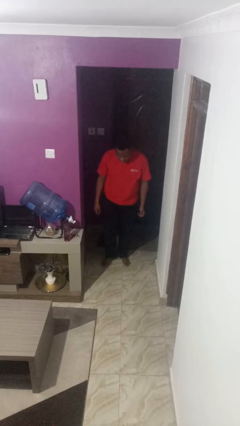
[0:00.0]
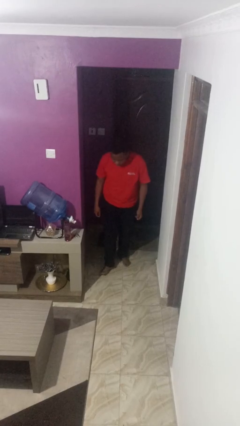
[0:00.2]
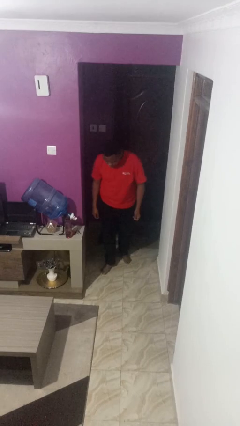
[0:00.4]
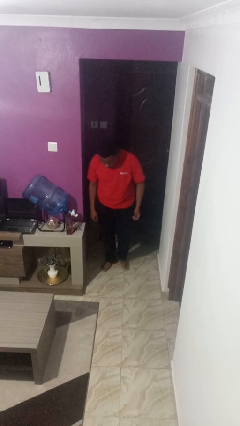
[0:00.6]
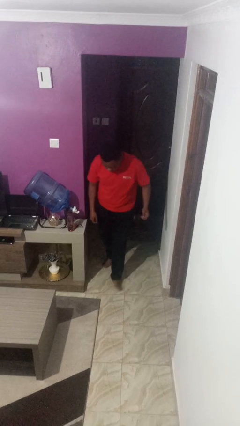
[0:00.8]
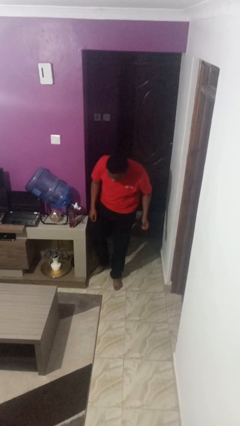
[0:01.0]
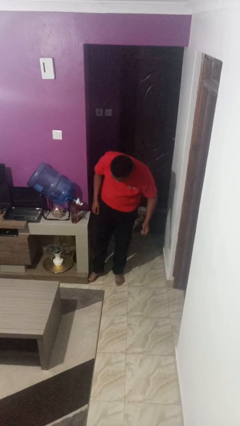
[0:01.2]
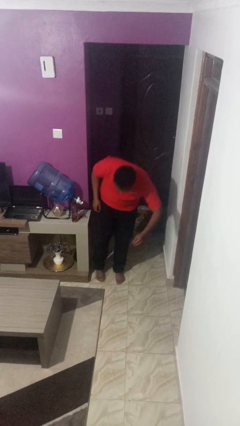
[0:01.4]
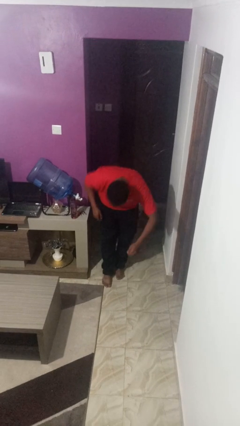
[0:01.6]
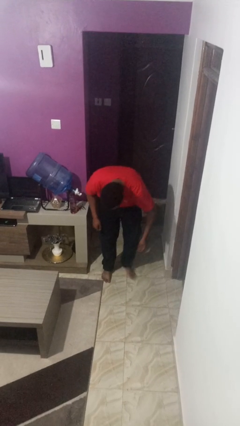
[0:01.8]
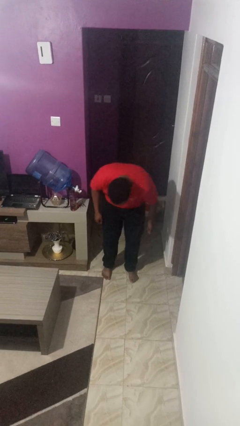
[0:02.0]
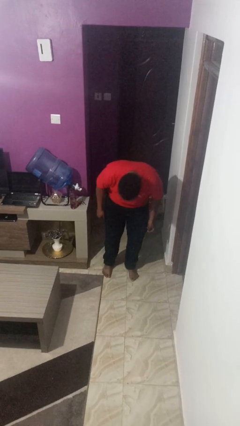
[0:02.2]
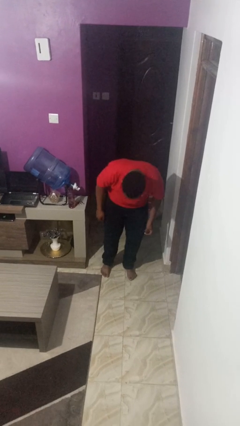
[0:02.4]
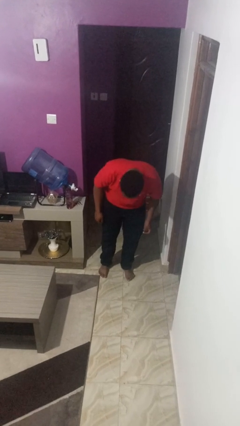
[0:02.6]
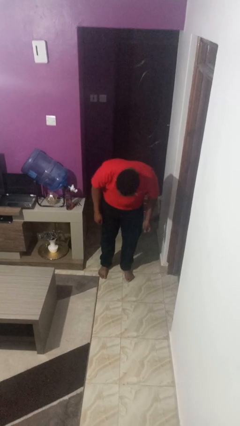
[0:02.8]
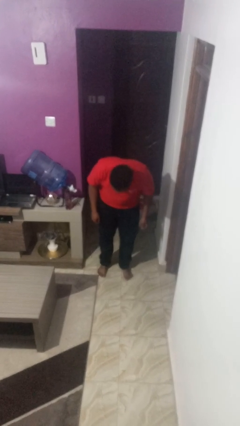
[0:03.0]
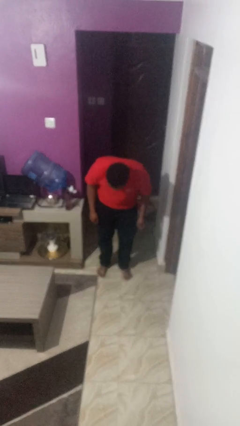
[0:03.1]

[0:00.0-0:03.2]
person stubs toe

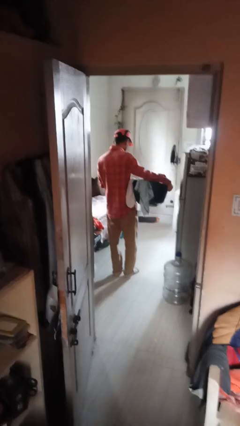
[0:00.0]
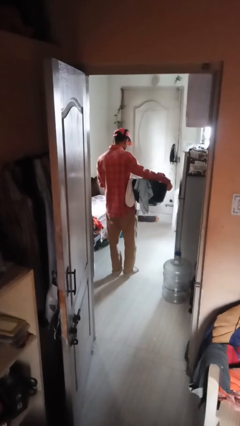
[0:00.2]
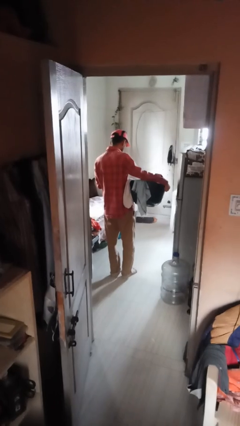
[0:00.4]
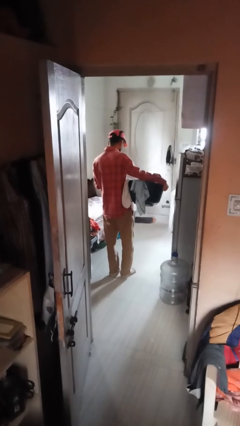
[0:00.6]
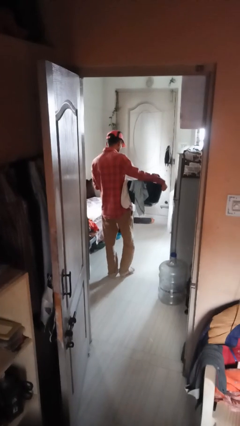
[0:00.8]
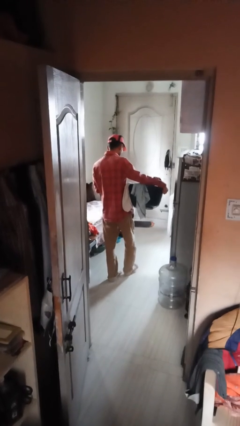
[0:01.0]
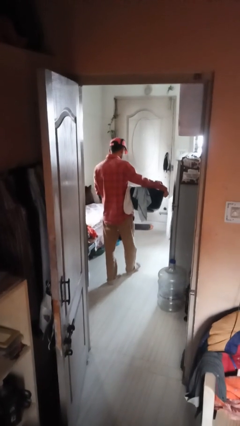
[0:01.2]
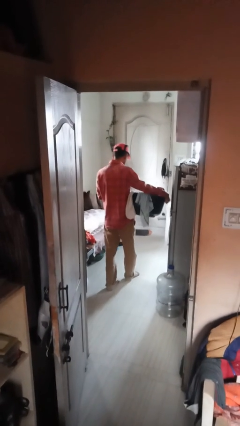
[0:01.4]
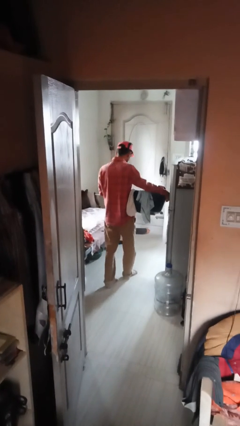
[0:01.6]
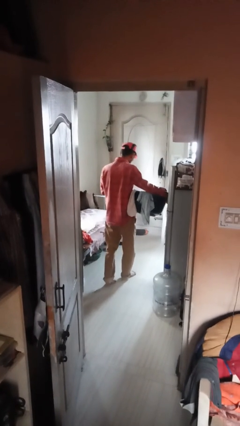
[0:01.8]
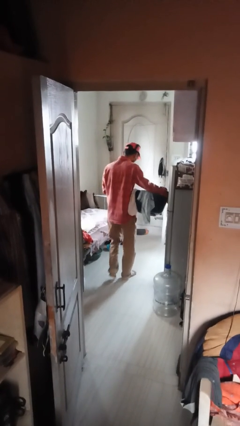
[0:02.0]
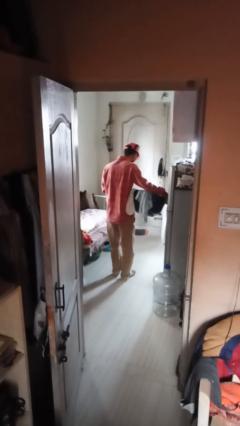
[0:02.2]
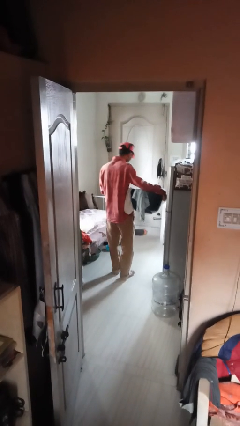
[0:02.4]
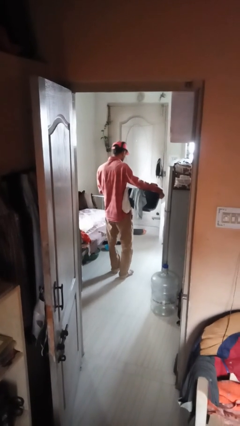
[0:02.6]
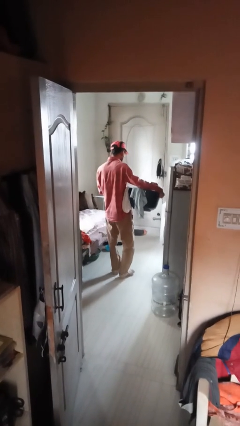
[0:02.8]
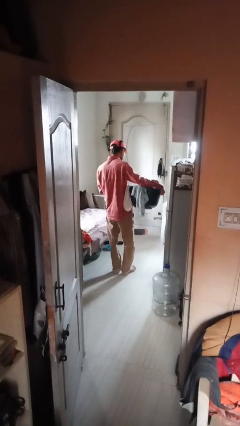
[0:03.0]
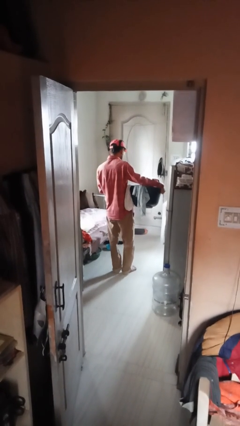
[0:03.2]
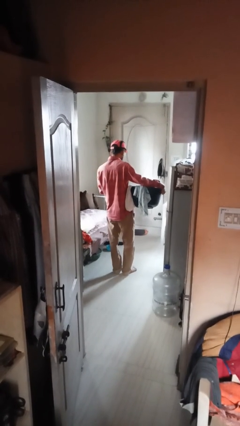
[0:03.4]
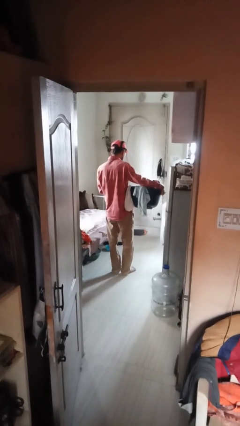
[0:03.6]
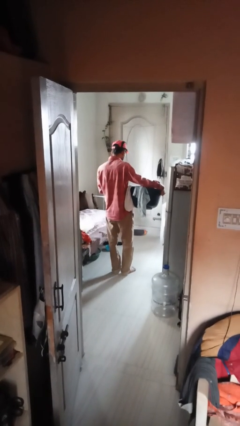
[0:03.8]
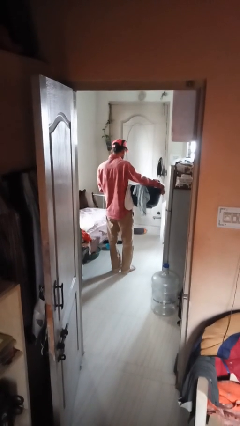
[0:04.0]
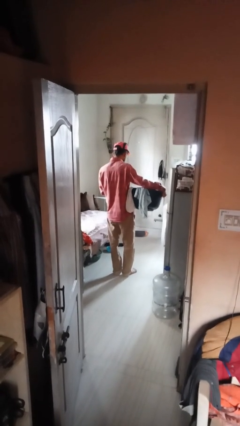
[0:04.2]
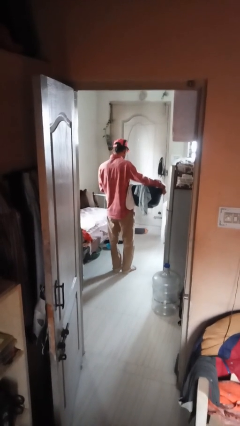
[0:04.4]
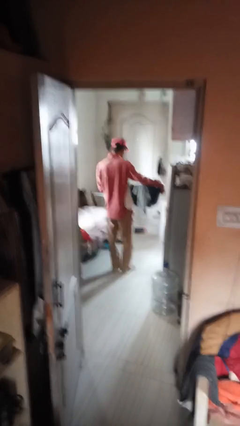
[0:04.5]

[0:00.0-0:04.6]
person carries furniture

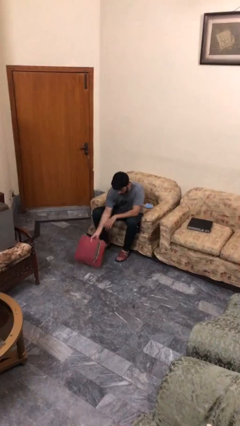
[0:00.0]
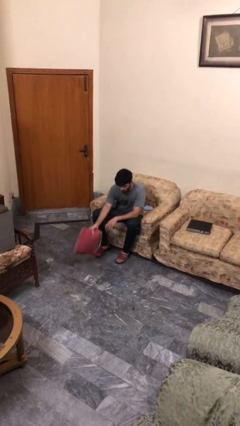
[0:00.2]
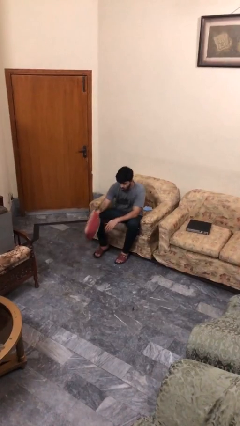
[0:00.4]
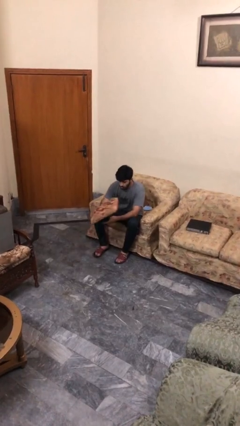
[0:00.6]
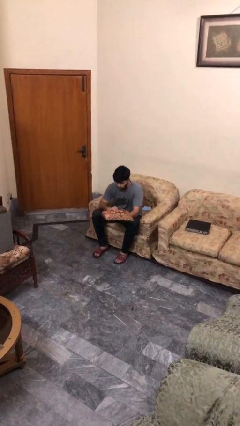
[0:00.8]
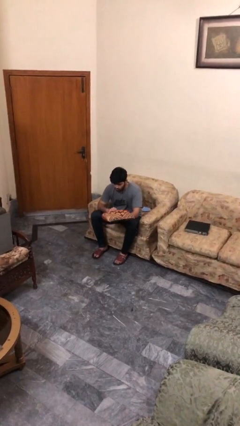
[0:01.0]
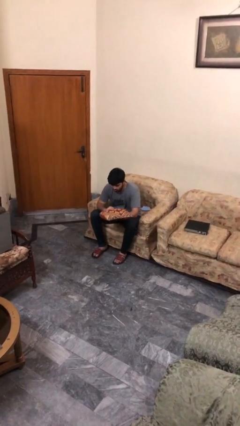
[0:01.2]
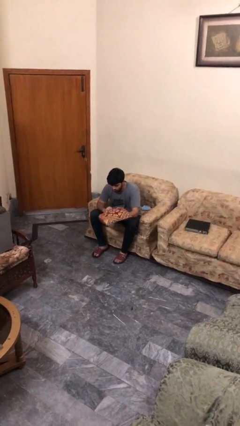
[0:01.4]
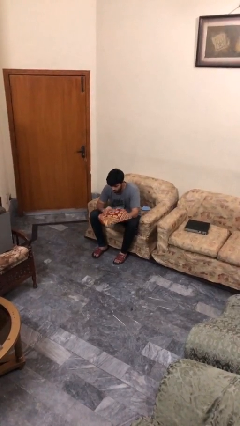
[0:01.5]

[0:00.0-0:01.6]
person picks up object from floor

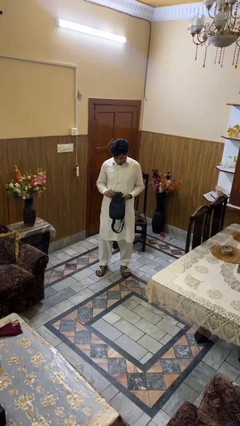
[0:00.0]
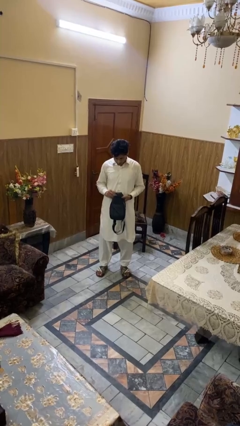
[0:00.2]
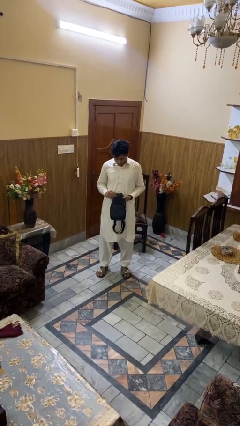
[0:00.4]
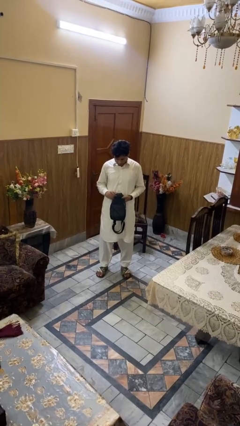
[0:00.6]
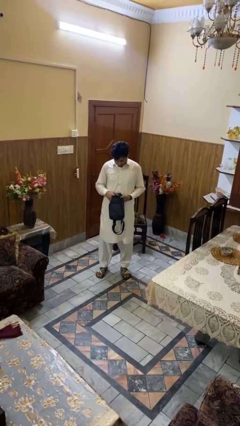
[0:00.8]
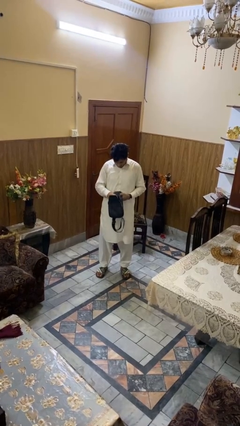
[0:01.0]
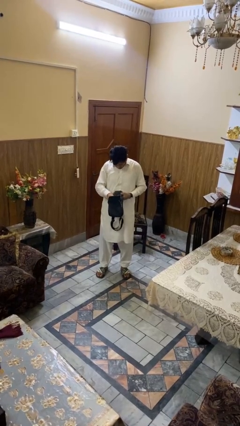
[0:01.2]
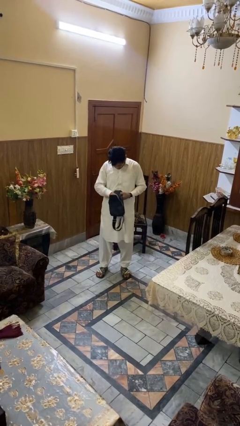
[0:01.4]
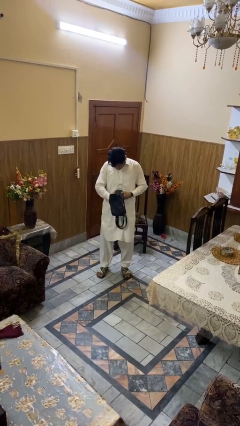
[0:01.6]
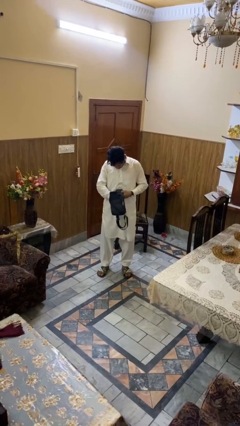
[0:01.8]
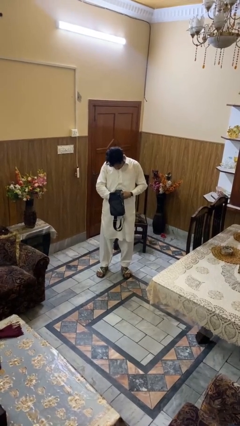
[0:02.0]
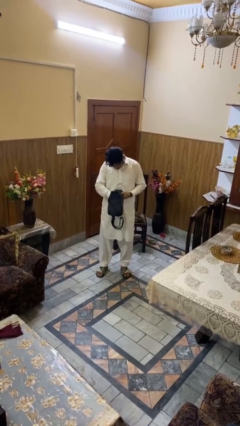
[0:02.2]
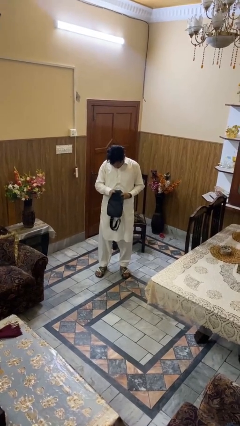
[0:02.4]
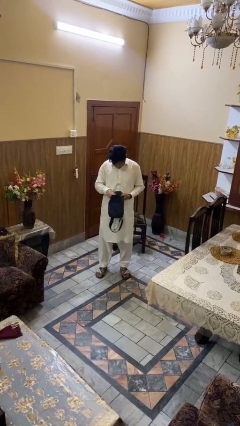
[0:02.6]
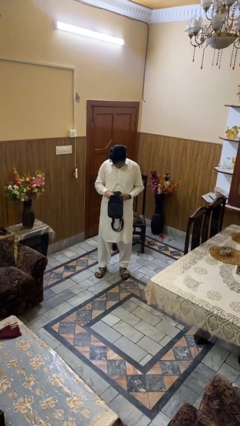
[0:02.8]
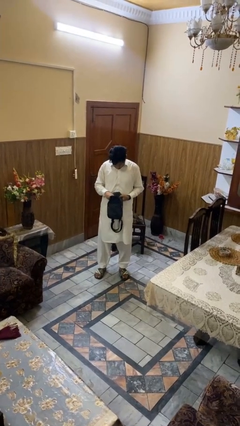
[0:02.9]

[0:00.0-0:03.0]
person searches in purse

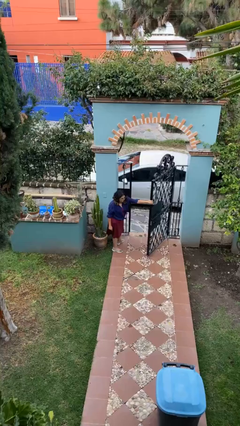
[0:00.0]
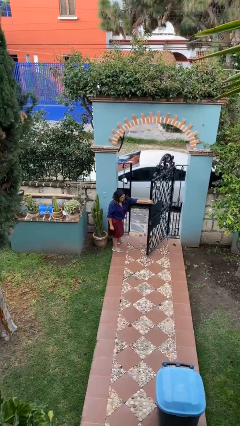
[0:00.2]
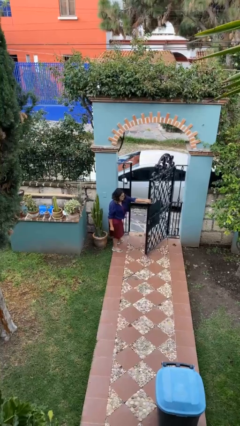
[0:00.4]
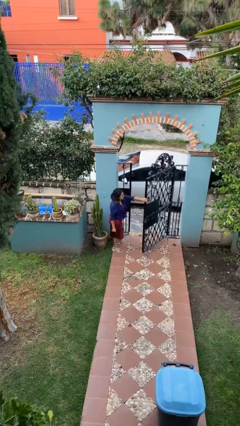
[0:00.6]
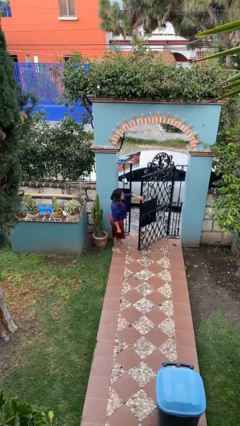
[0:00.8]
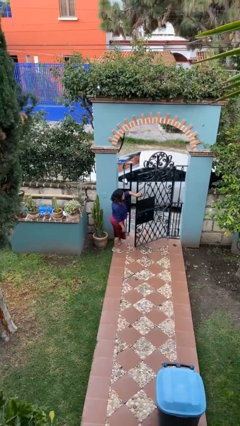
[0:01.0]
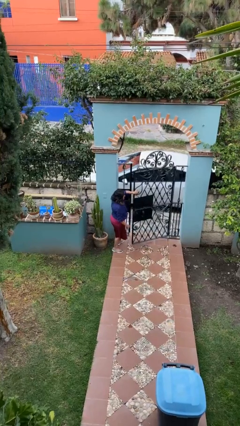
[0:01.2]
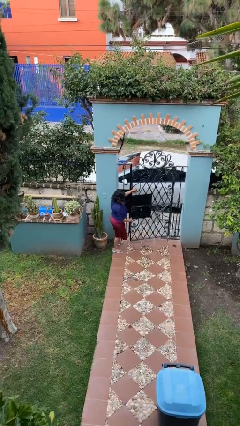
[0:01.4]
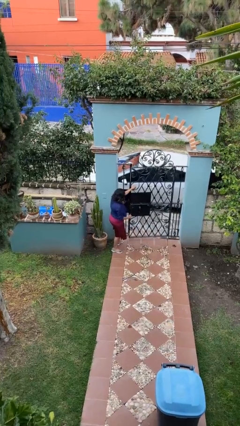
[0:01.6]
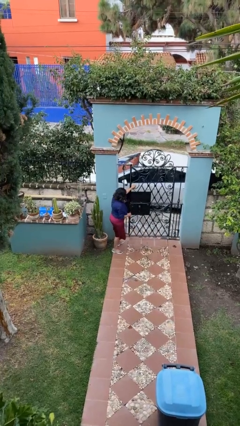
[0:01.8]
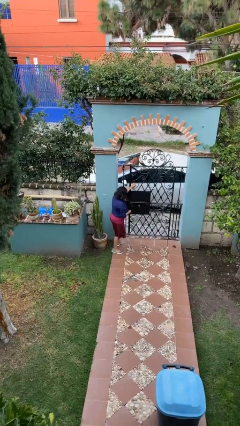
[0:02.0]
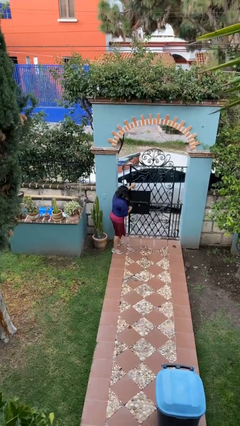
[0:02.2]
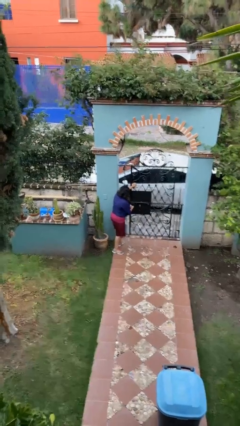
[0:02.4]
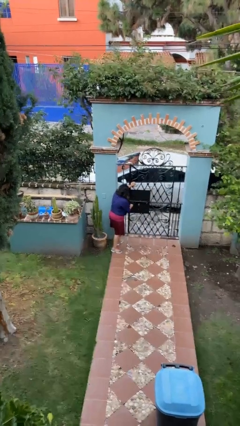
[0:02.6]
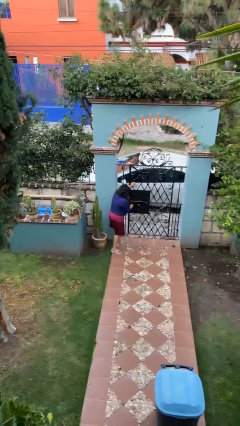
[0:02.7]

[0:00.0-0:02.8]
person closes facility door

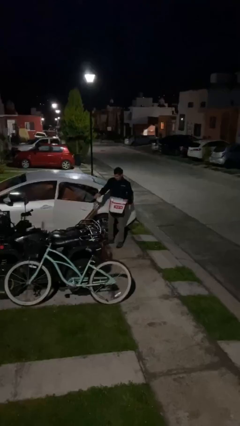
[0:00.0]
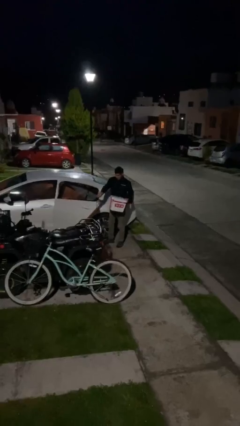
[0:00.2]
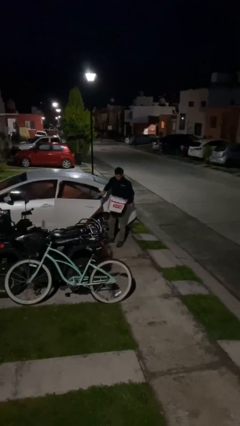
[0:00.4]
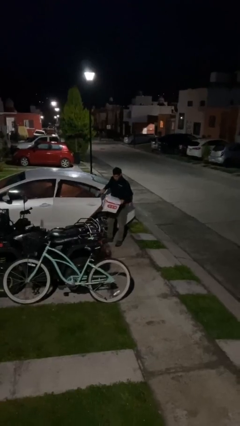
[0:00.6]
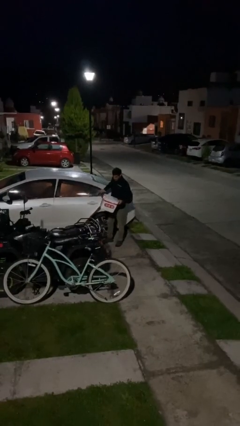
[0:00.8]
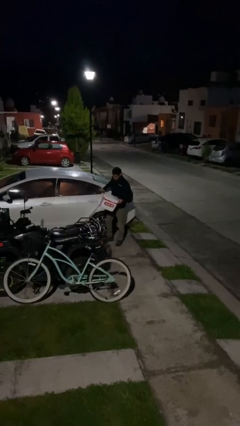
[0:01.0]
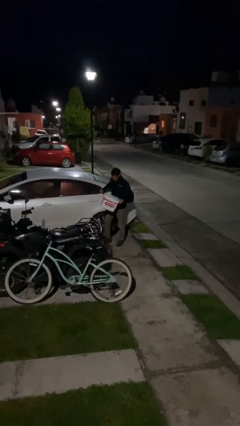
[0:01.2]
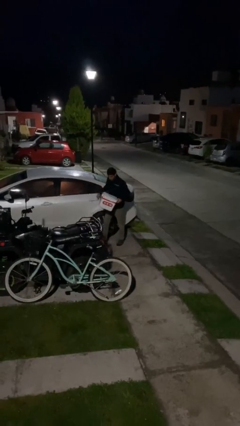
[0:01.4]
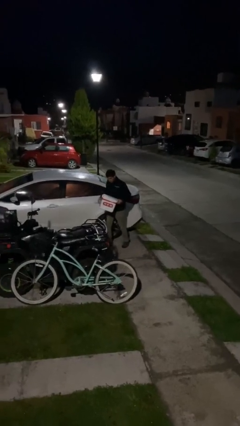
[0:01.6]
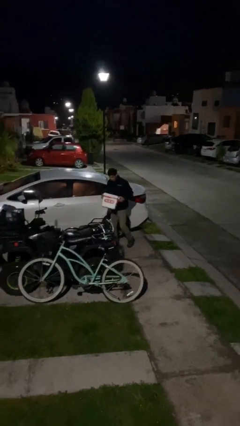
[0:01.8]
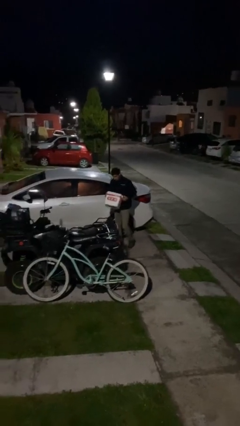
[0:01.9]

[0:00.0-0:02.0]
person closes car door

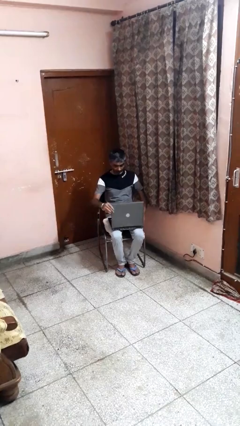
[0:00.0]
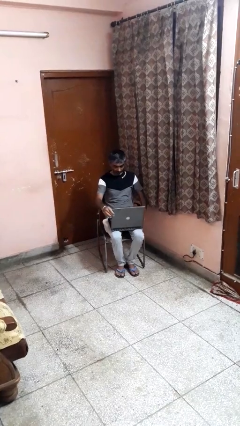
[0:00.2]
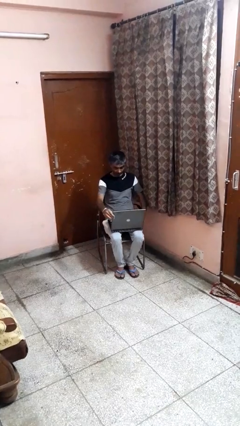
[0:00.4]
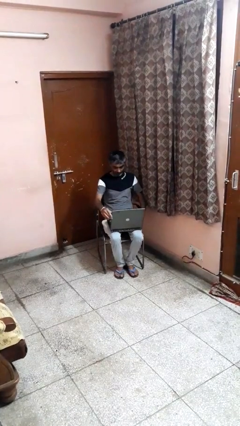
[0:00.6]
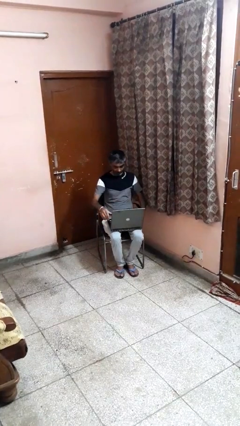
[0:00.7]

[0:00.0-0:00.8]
person opens laptop
